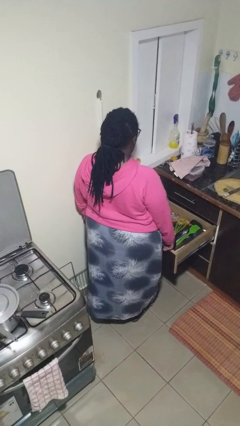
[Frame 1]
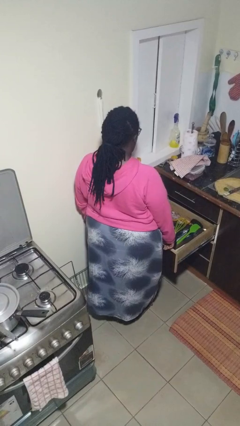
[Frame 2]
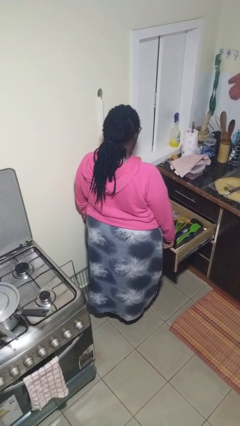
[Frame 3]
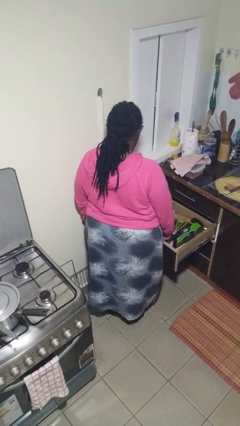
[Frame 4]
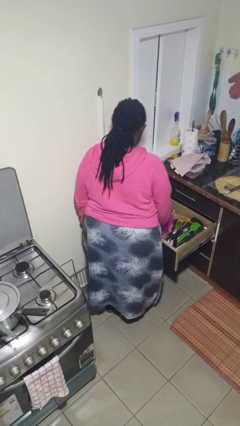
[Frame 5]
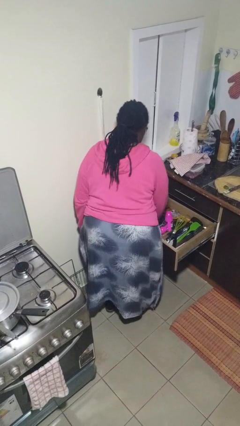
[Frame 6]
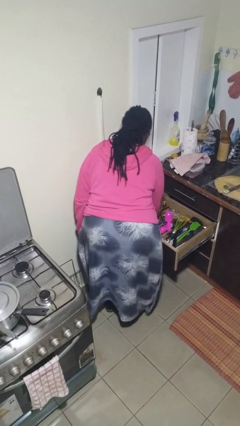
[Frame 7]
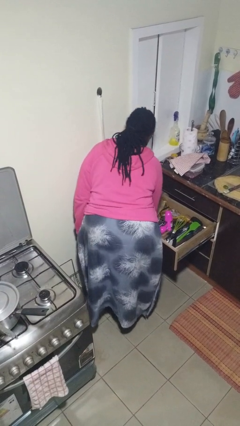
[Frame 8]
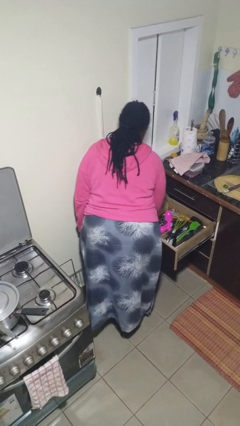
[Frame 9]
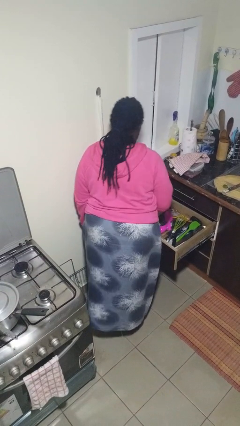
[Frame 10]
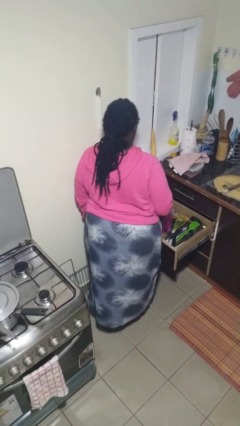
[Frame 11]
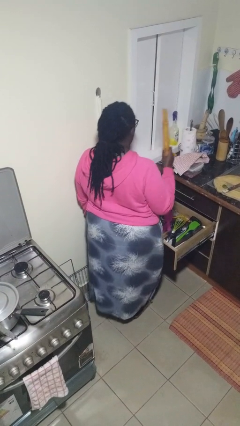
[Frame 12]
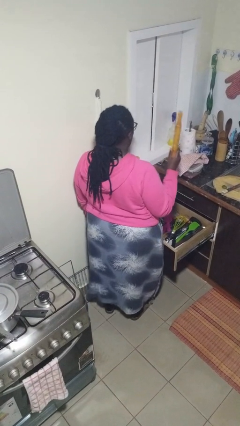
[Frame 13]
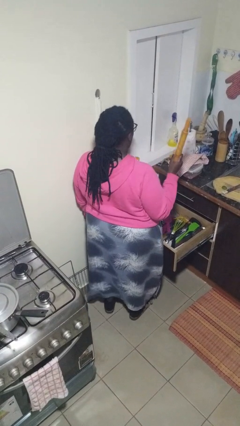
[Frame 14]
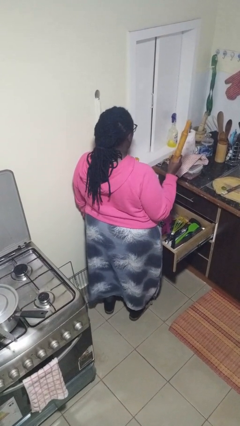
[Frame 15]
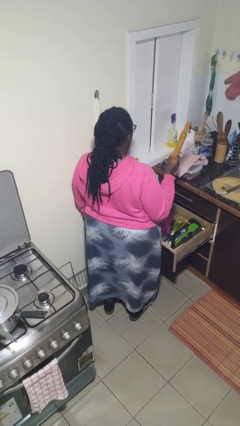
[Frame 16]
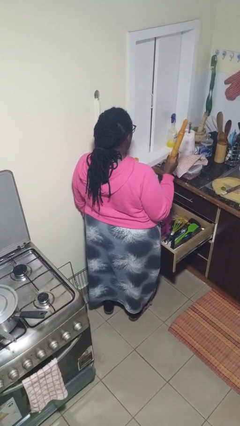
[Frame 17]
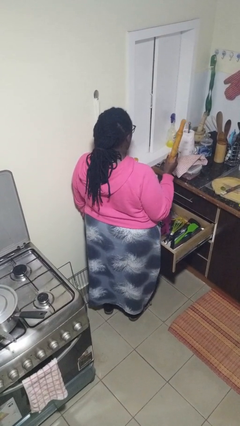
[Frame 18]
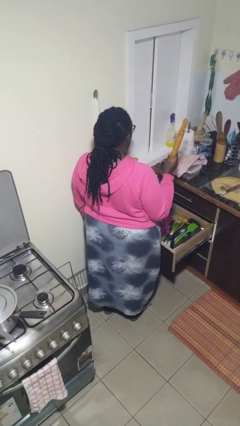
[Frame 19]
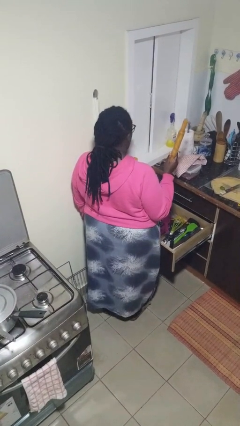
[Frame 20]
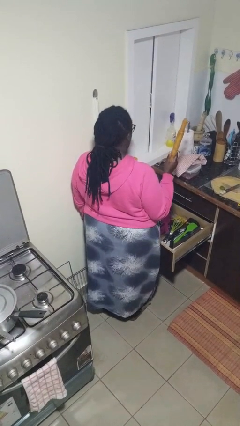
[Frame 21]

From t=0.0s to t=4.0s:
person takes object from kitchen drawer

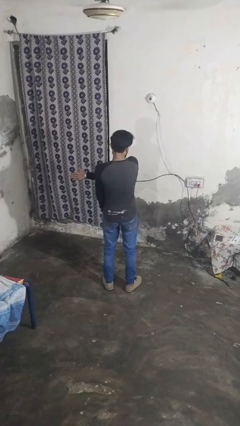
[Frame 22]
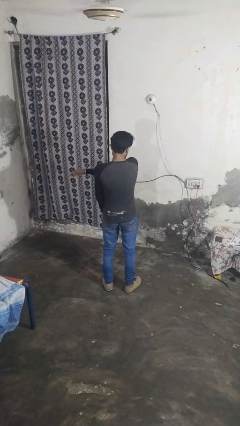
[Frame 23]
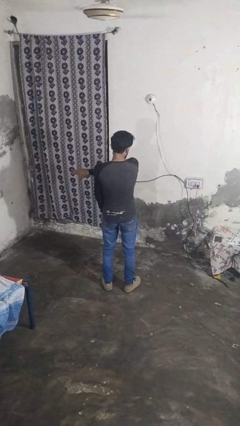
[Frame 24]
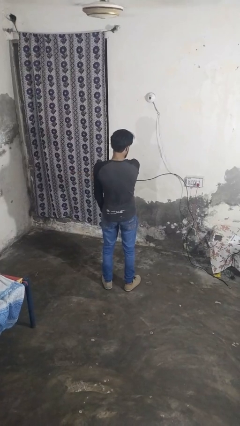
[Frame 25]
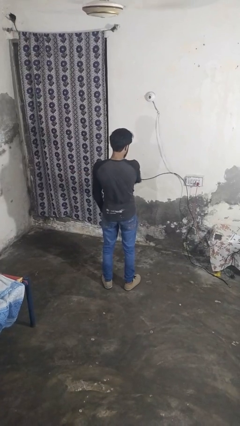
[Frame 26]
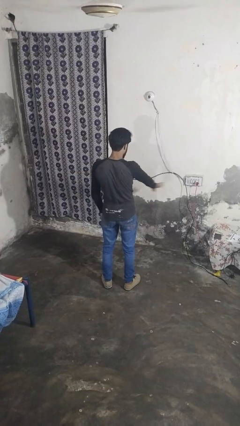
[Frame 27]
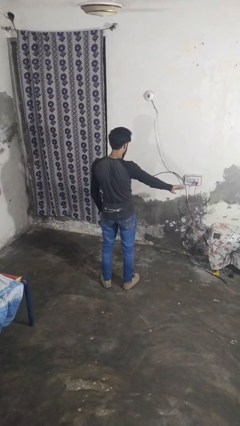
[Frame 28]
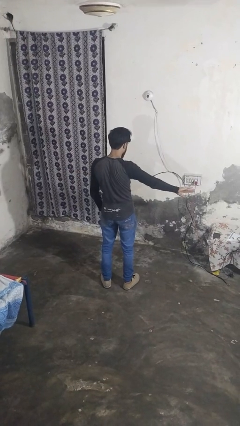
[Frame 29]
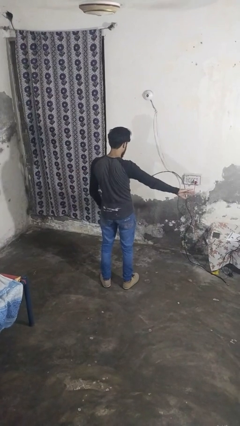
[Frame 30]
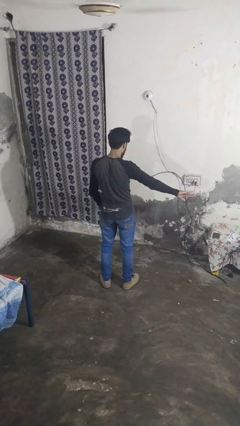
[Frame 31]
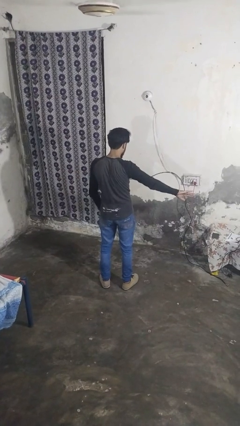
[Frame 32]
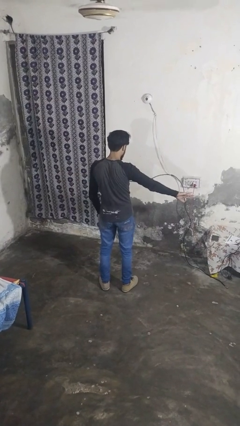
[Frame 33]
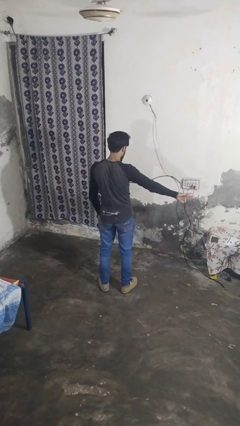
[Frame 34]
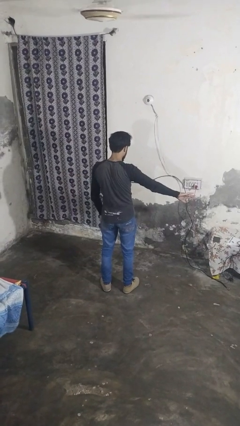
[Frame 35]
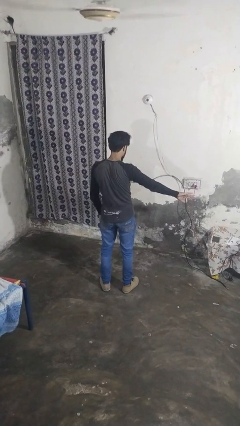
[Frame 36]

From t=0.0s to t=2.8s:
person gestures swipe right

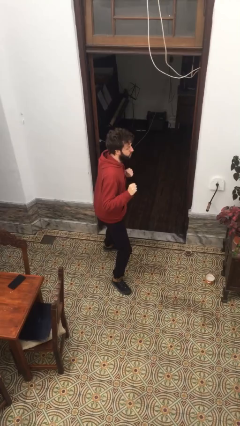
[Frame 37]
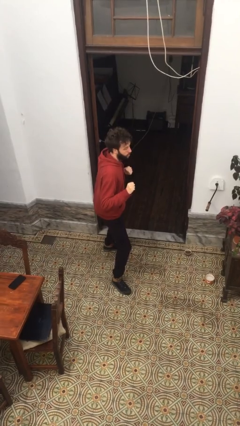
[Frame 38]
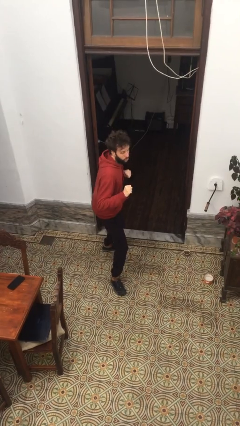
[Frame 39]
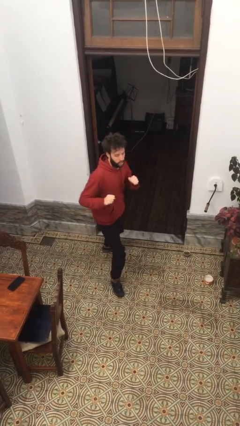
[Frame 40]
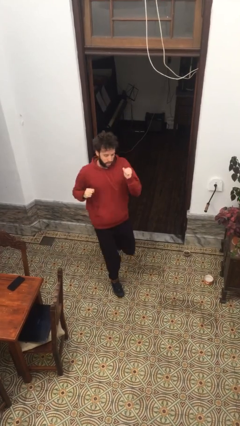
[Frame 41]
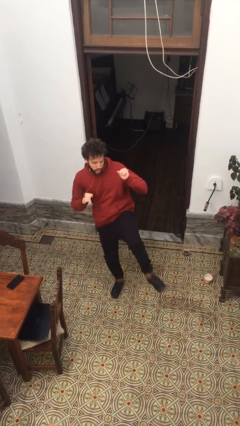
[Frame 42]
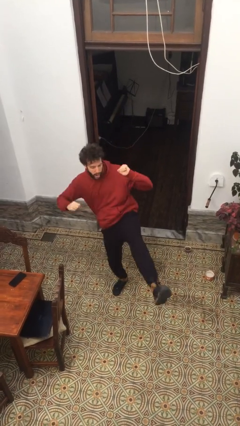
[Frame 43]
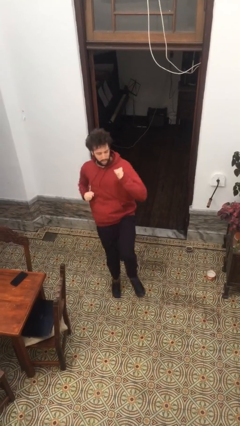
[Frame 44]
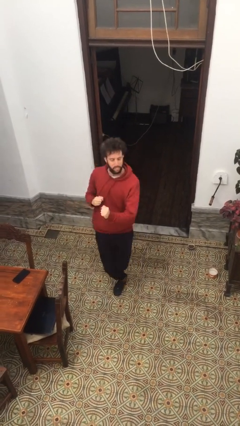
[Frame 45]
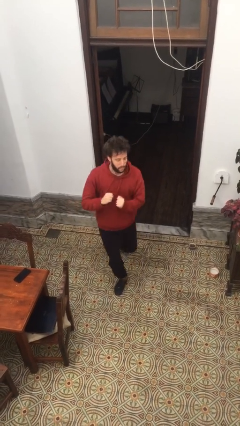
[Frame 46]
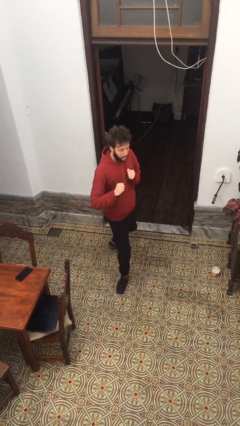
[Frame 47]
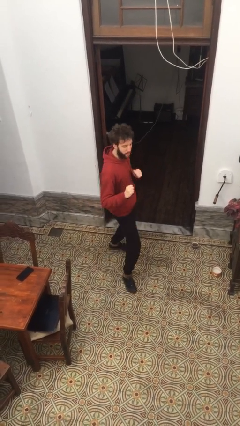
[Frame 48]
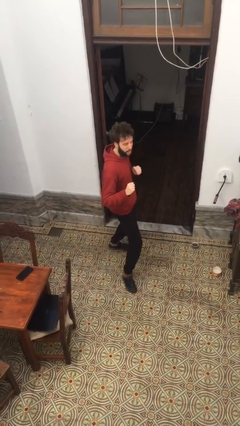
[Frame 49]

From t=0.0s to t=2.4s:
person karate kicks

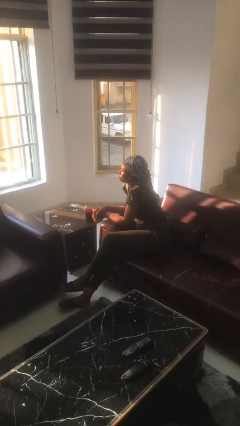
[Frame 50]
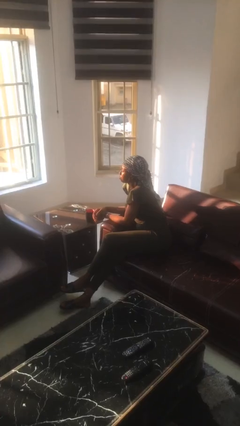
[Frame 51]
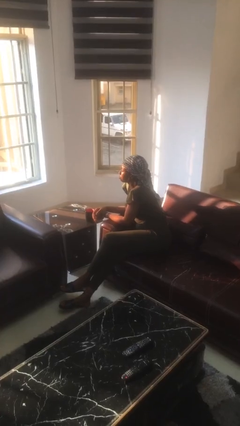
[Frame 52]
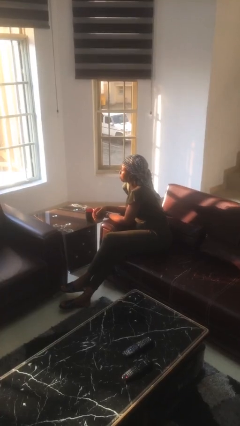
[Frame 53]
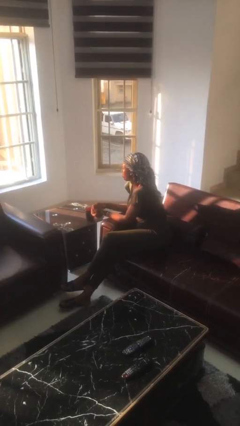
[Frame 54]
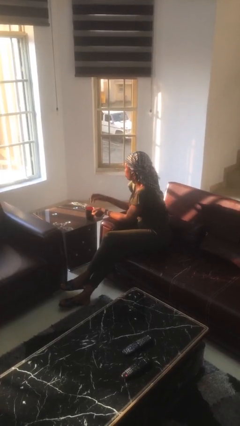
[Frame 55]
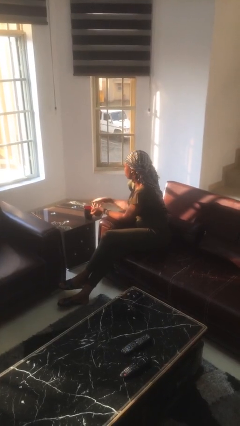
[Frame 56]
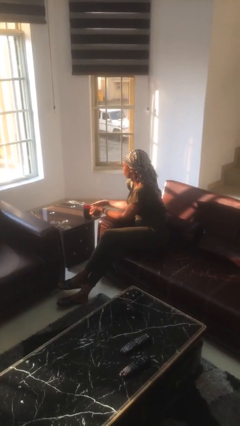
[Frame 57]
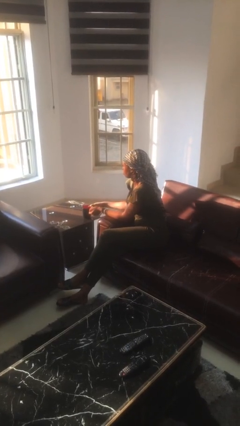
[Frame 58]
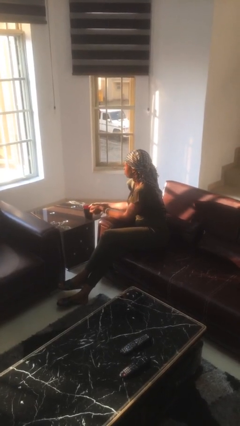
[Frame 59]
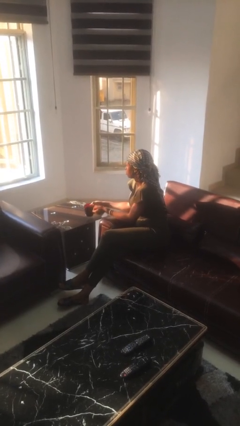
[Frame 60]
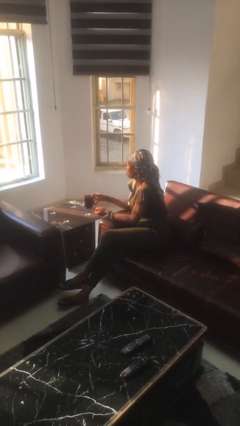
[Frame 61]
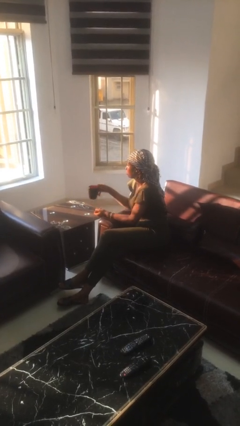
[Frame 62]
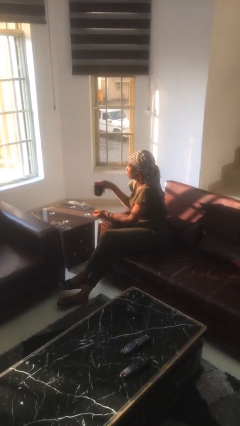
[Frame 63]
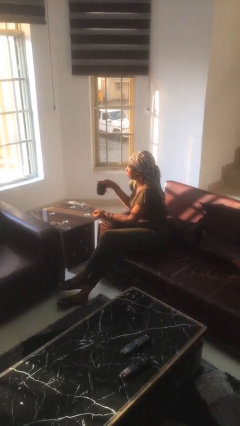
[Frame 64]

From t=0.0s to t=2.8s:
person picks up object from table

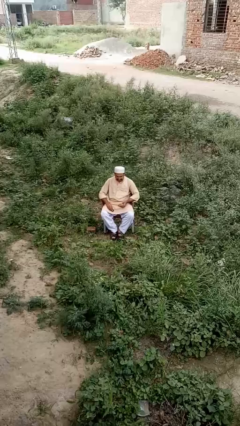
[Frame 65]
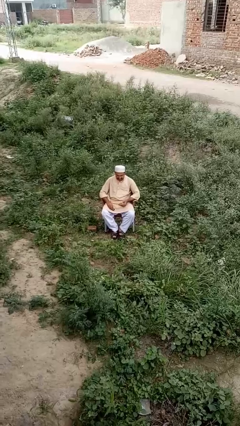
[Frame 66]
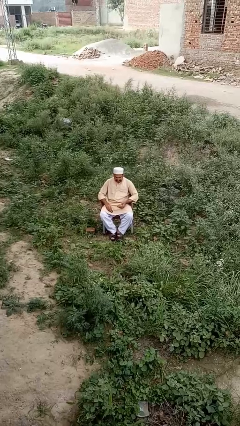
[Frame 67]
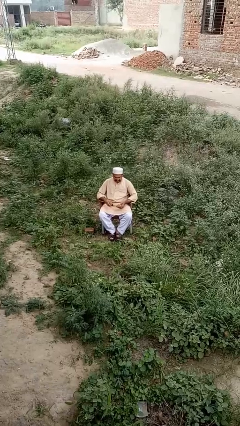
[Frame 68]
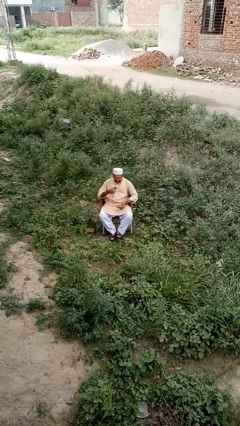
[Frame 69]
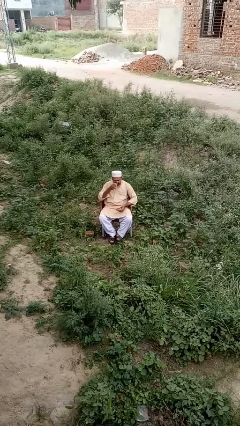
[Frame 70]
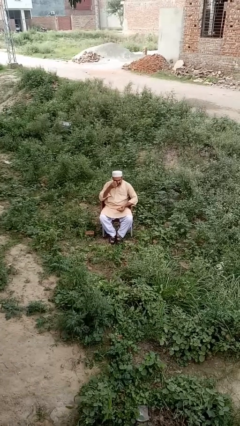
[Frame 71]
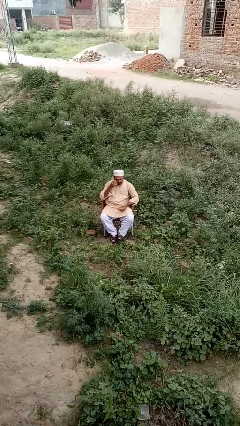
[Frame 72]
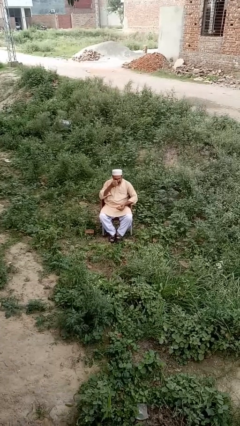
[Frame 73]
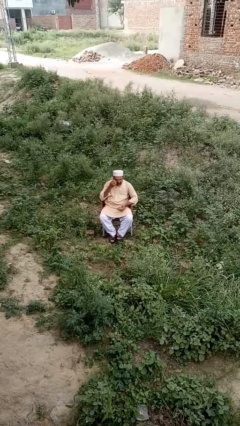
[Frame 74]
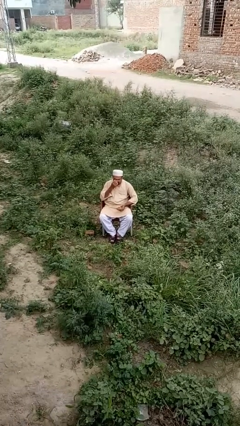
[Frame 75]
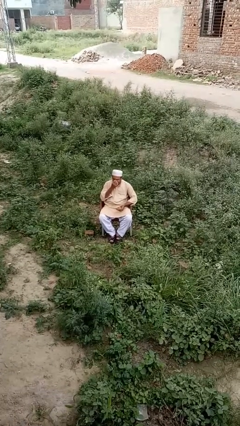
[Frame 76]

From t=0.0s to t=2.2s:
person shades eyes

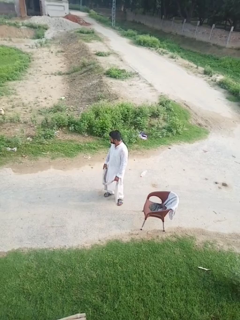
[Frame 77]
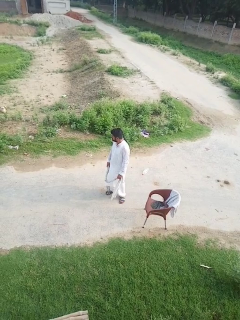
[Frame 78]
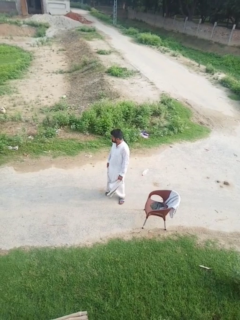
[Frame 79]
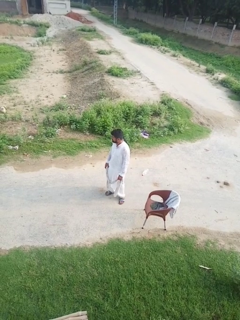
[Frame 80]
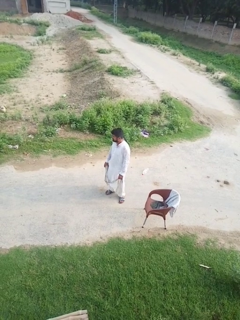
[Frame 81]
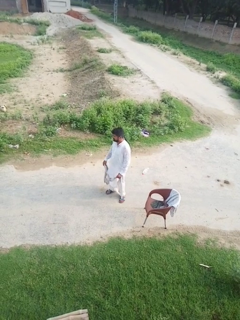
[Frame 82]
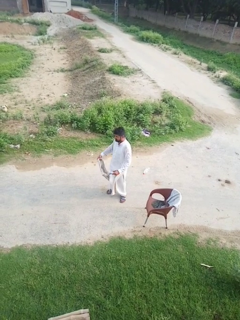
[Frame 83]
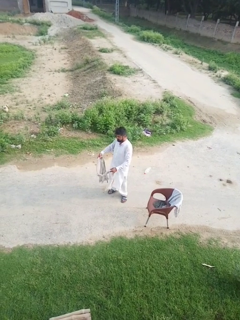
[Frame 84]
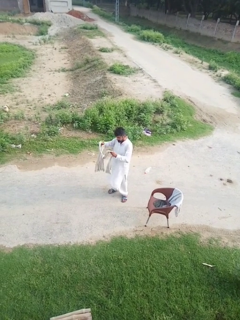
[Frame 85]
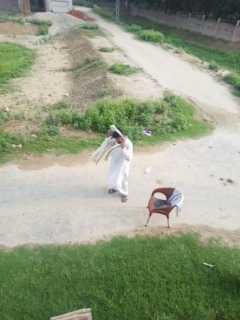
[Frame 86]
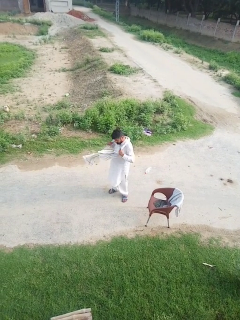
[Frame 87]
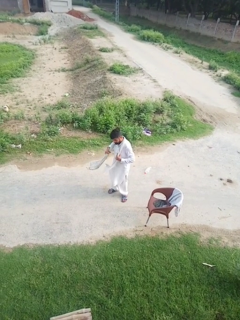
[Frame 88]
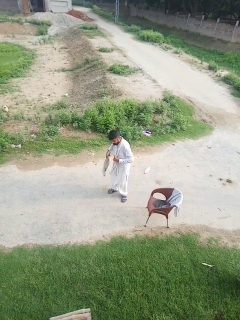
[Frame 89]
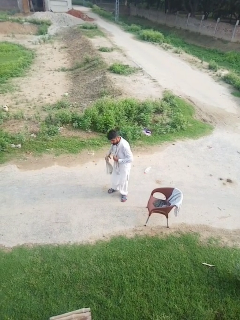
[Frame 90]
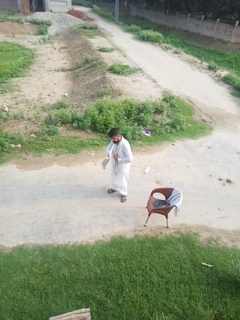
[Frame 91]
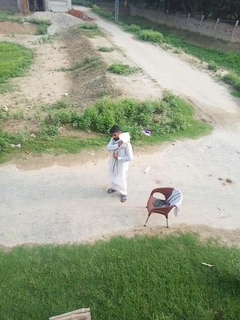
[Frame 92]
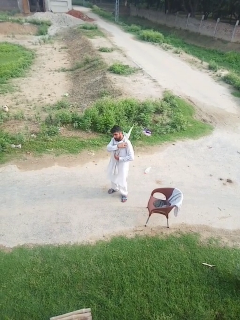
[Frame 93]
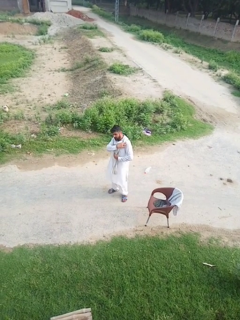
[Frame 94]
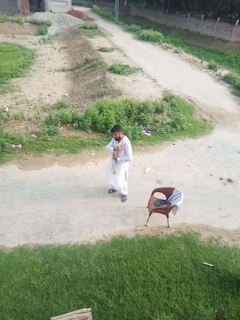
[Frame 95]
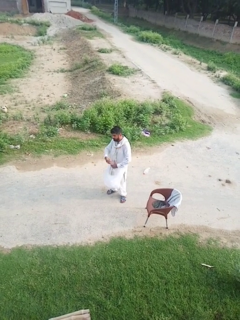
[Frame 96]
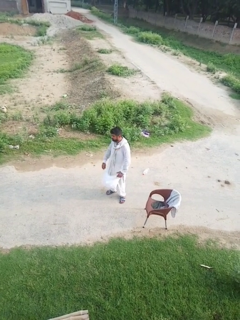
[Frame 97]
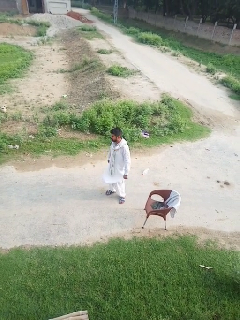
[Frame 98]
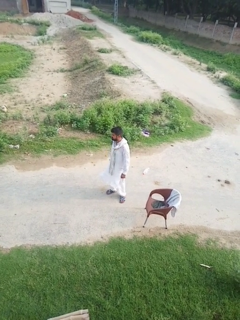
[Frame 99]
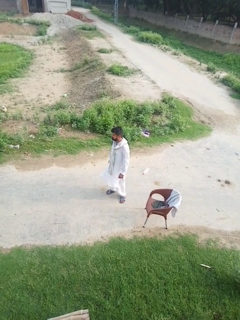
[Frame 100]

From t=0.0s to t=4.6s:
person puts on scarf

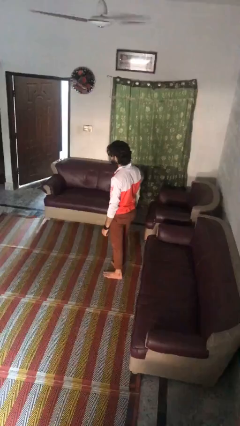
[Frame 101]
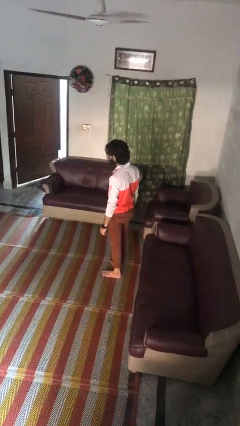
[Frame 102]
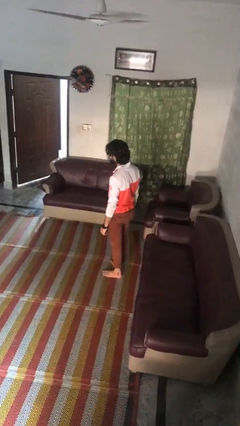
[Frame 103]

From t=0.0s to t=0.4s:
person looks at wristwatch
